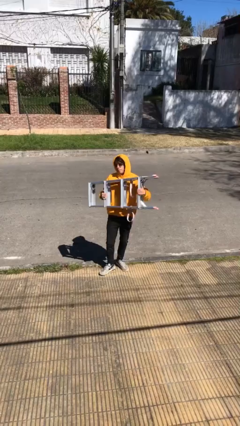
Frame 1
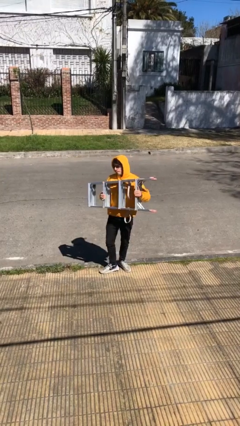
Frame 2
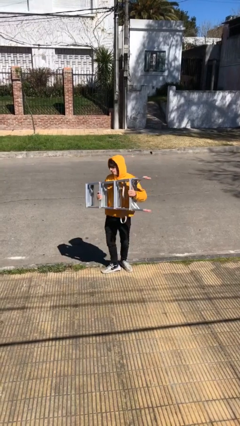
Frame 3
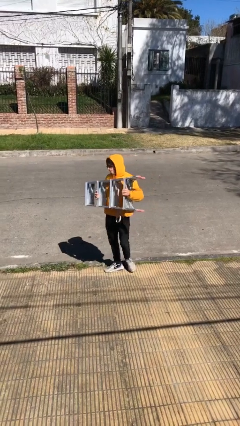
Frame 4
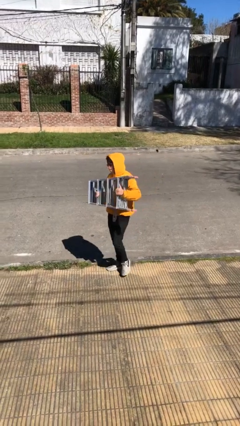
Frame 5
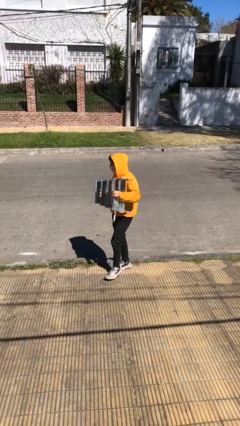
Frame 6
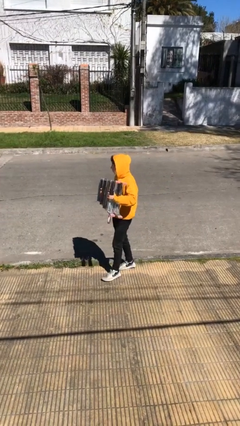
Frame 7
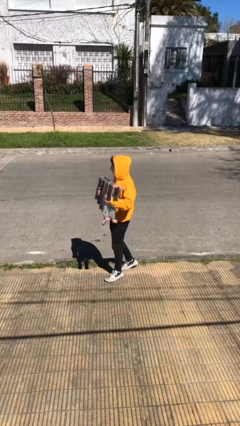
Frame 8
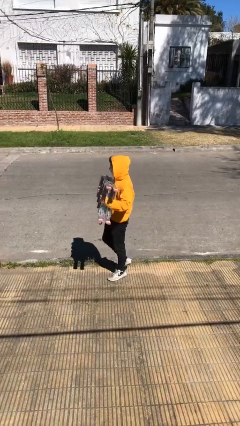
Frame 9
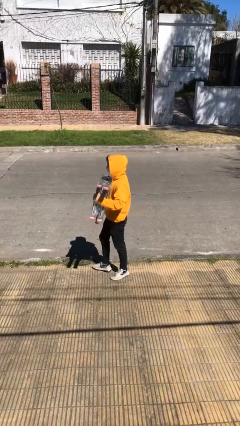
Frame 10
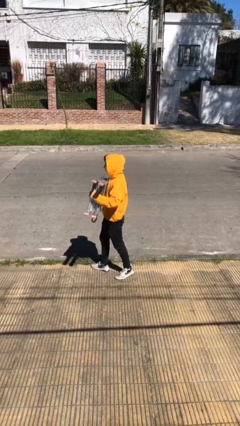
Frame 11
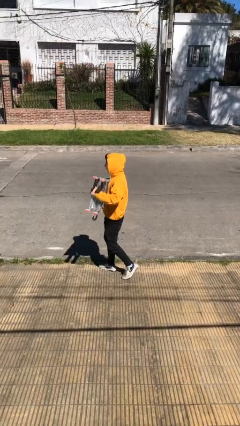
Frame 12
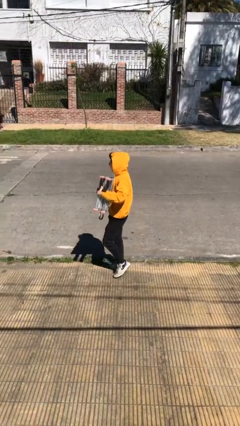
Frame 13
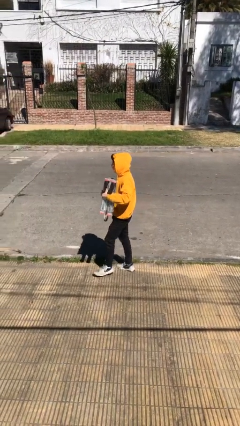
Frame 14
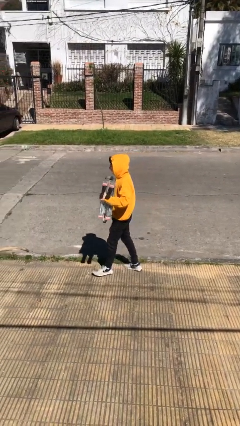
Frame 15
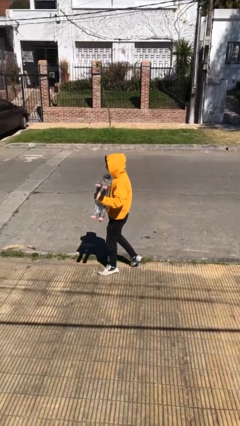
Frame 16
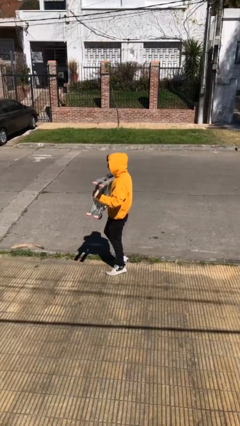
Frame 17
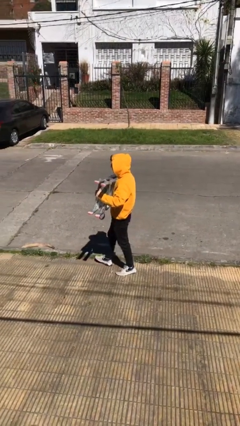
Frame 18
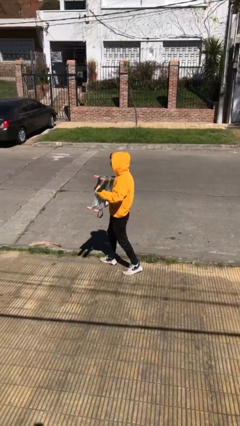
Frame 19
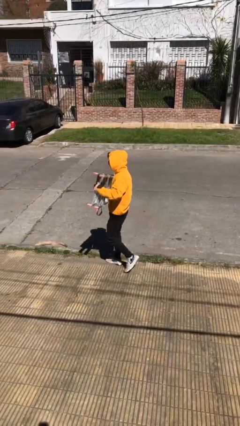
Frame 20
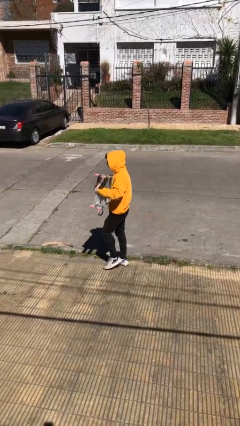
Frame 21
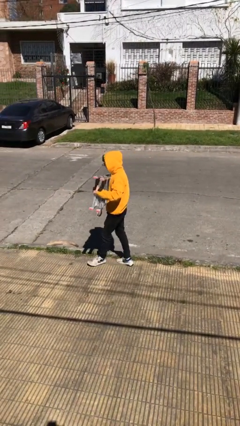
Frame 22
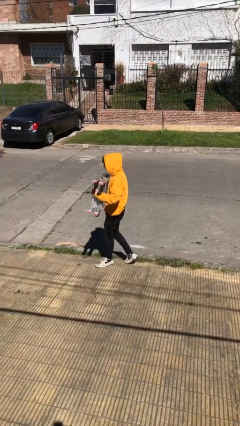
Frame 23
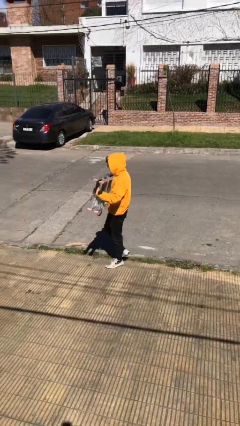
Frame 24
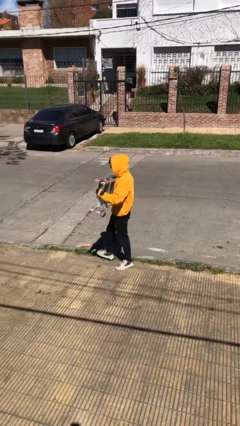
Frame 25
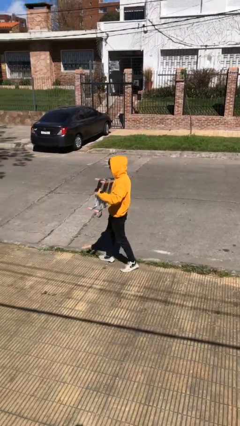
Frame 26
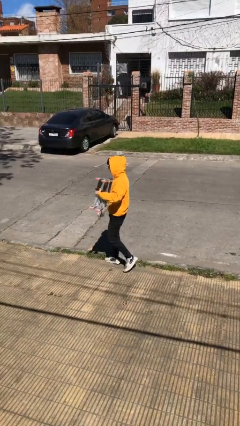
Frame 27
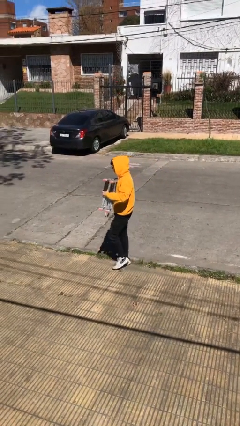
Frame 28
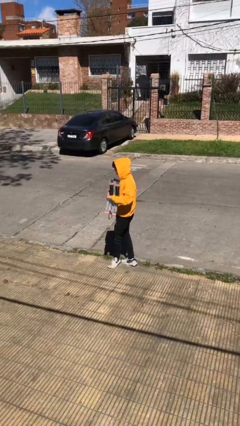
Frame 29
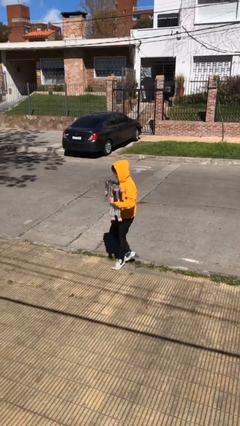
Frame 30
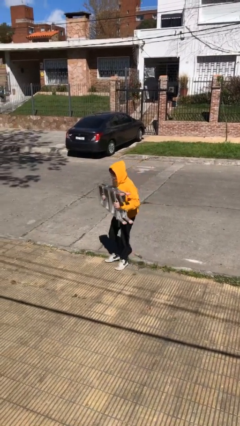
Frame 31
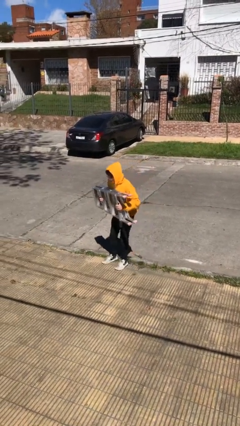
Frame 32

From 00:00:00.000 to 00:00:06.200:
person carries heavy object

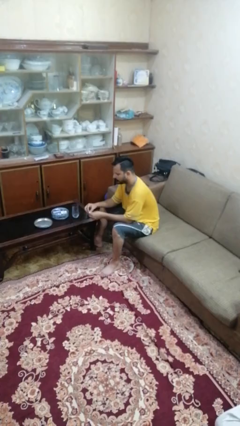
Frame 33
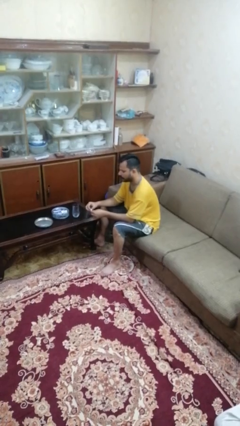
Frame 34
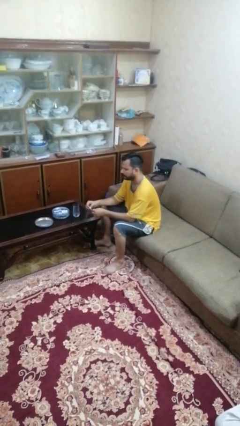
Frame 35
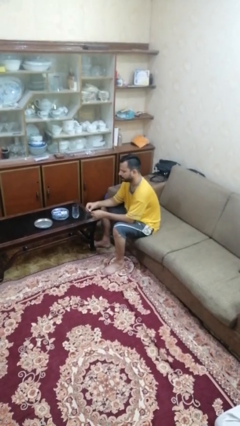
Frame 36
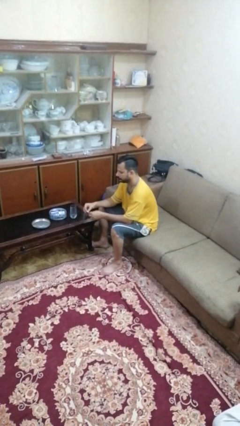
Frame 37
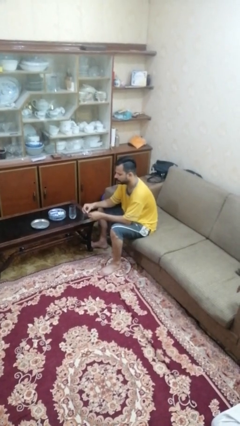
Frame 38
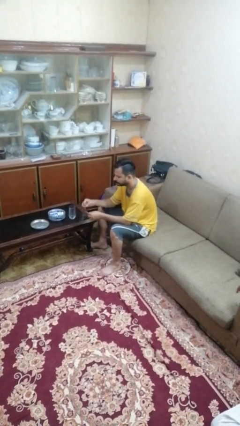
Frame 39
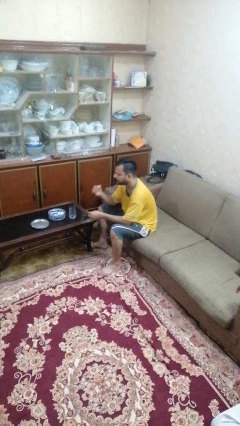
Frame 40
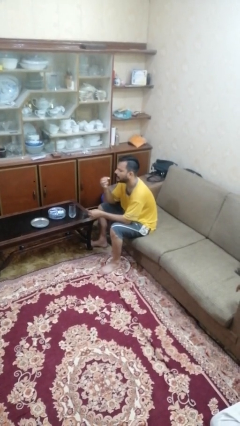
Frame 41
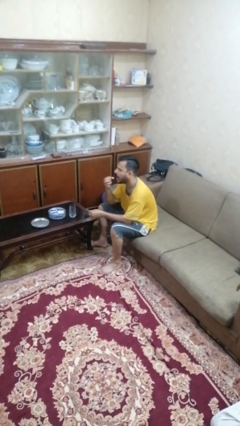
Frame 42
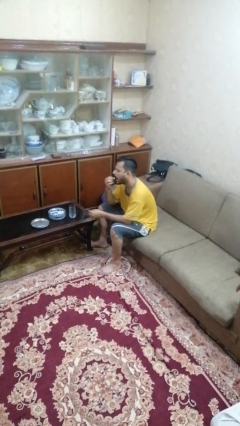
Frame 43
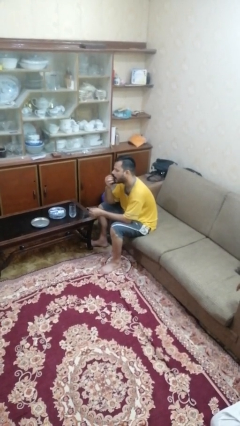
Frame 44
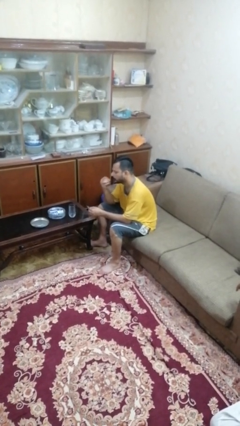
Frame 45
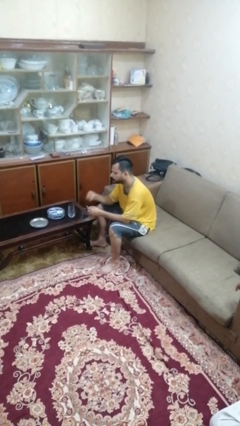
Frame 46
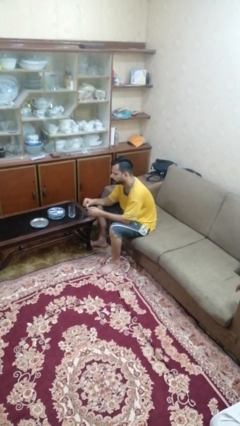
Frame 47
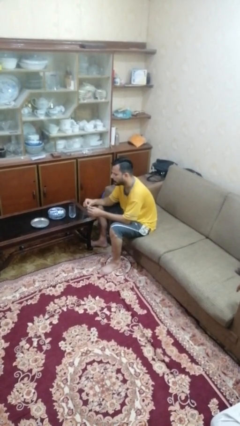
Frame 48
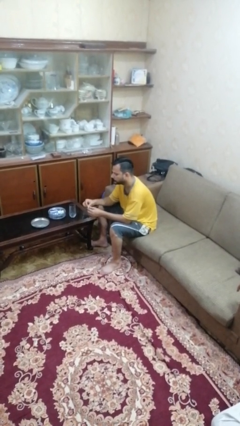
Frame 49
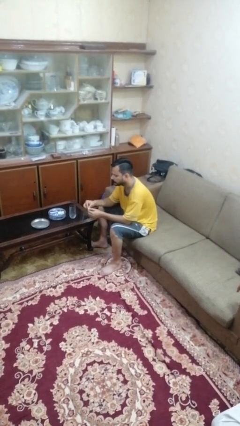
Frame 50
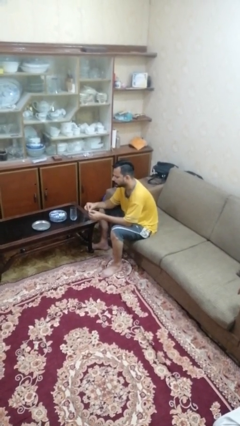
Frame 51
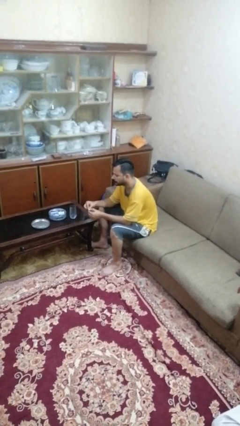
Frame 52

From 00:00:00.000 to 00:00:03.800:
person takes medicine pills

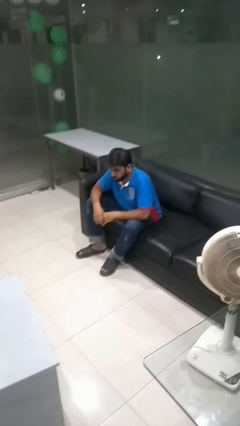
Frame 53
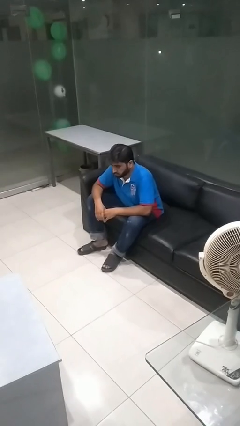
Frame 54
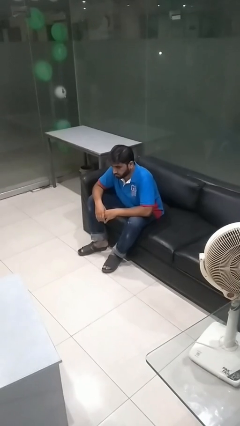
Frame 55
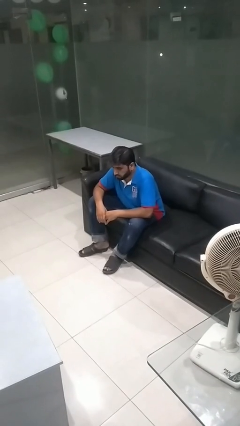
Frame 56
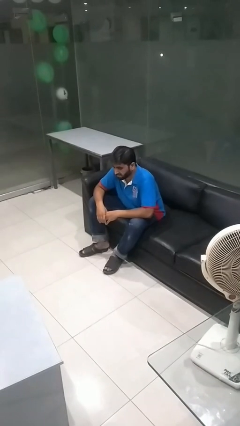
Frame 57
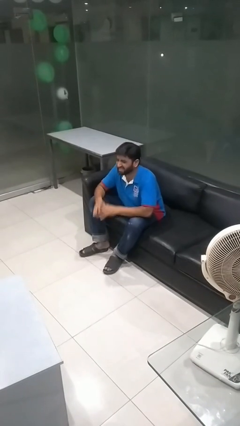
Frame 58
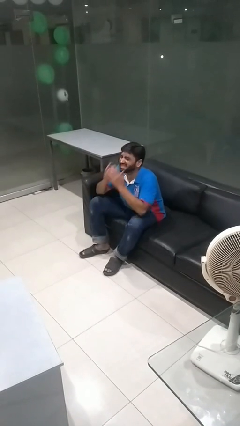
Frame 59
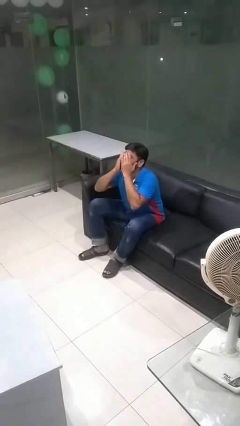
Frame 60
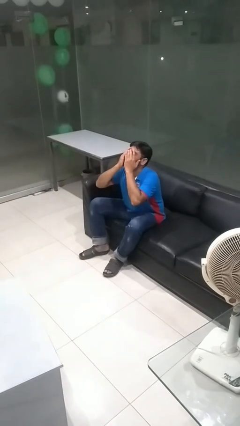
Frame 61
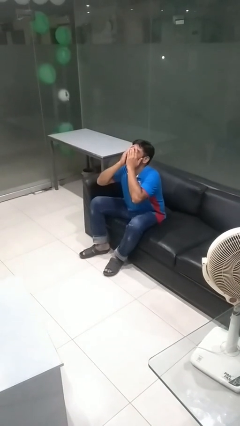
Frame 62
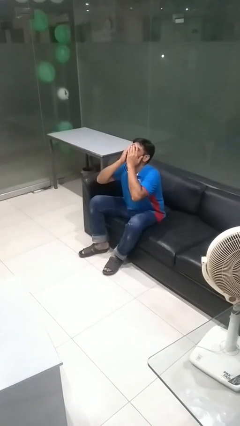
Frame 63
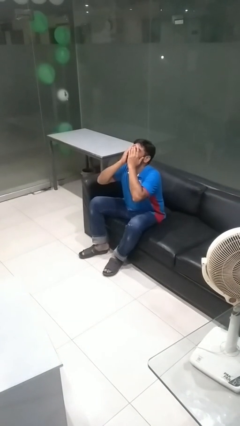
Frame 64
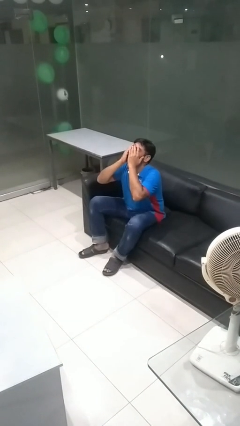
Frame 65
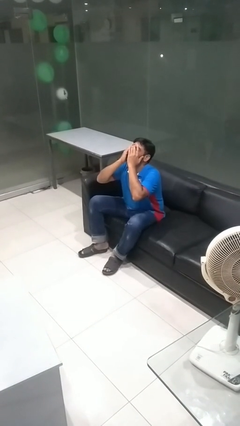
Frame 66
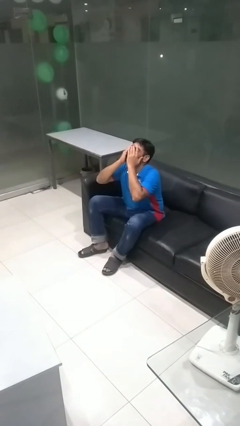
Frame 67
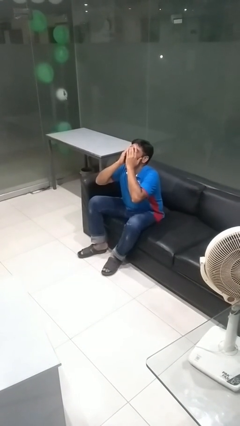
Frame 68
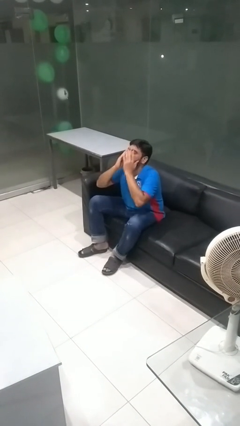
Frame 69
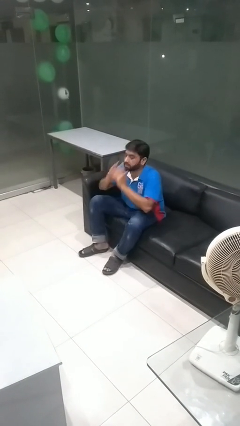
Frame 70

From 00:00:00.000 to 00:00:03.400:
person covers face with hands

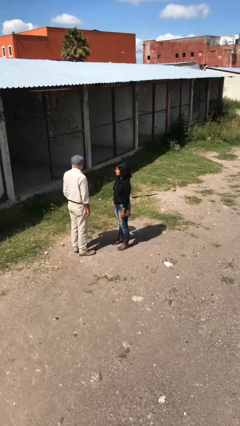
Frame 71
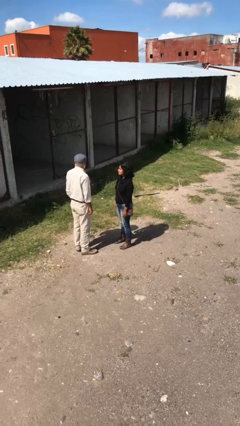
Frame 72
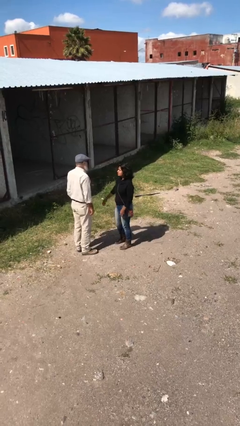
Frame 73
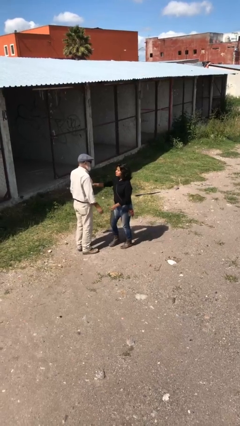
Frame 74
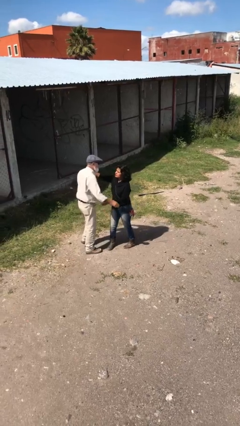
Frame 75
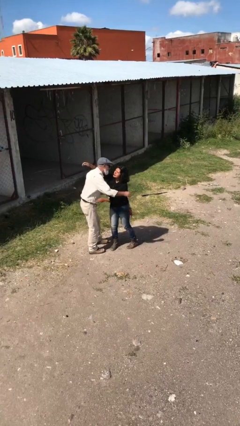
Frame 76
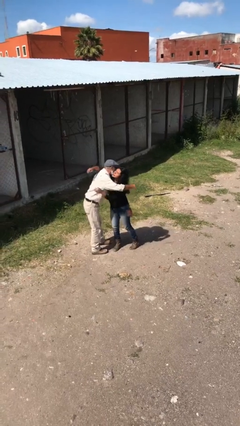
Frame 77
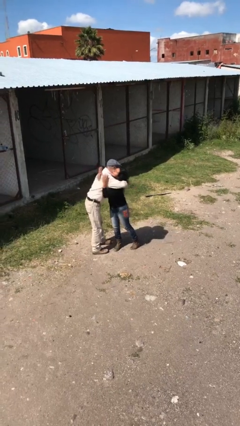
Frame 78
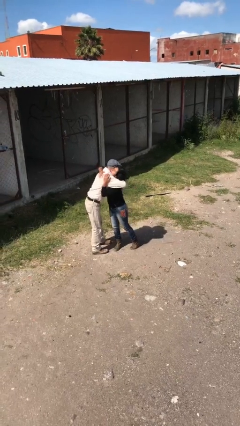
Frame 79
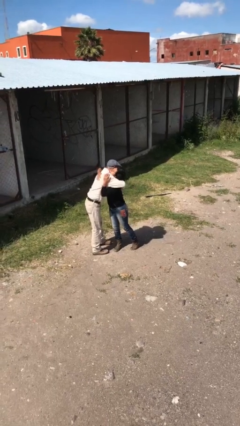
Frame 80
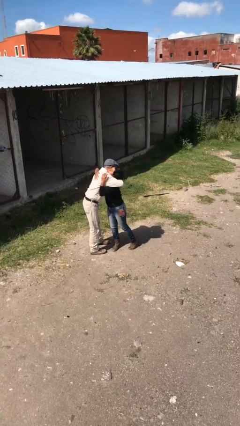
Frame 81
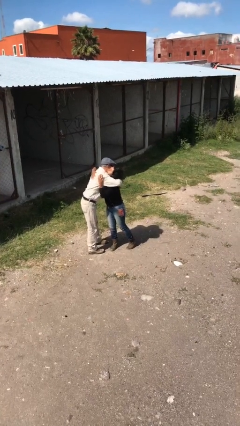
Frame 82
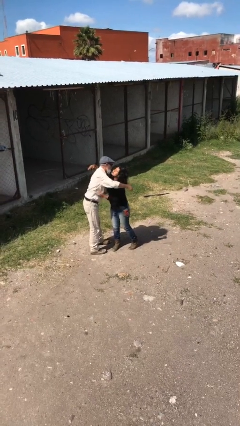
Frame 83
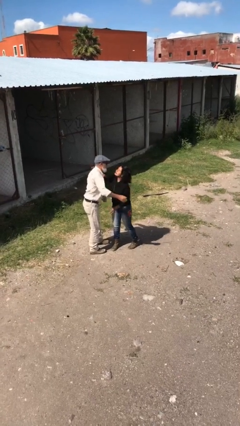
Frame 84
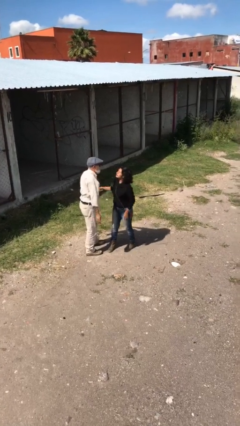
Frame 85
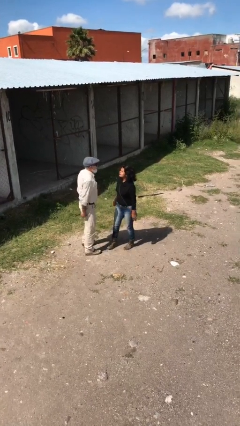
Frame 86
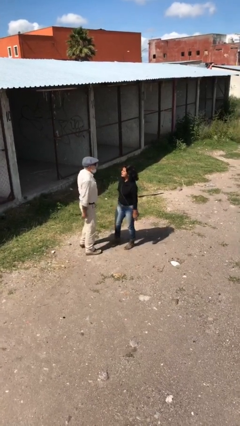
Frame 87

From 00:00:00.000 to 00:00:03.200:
person embraces person

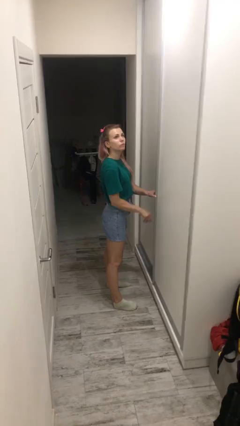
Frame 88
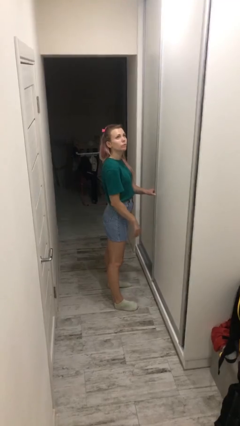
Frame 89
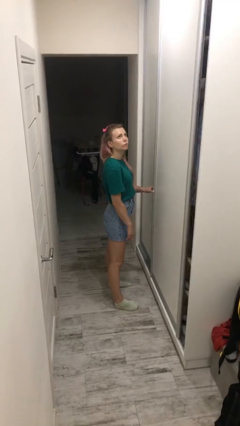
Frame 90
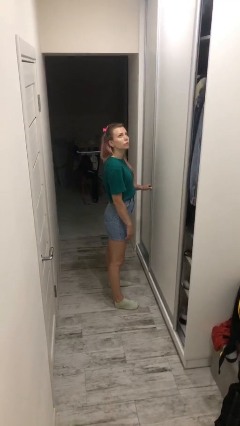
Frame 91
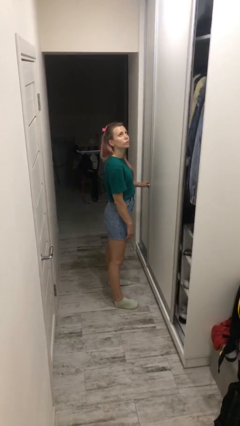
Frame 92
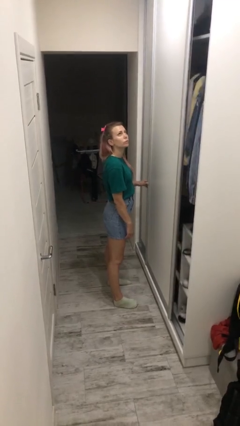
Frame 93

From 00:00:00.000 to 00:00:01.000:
person opens sliding door
